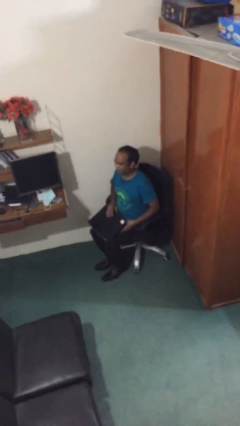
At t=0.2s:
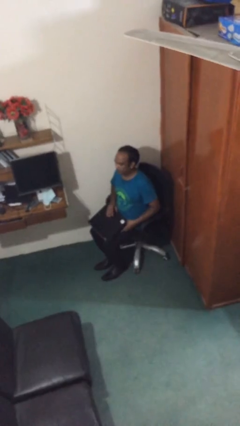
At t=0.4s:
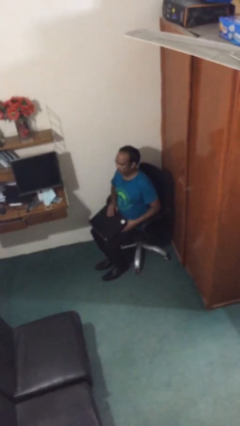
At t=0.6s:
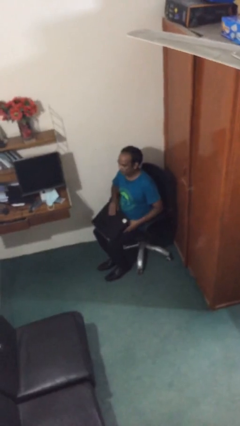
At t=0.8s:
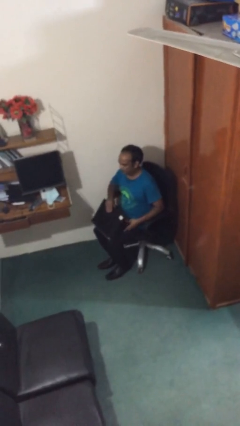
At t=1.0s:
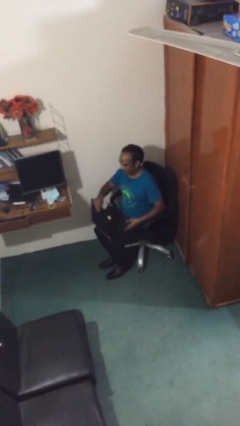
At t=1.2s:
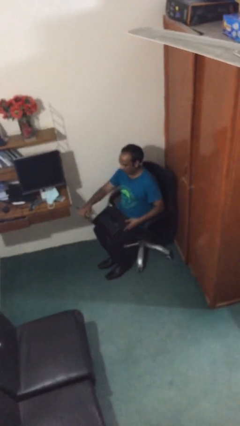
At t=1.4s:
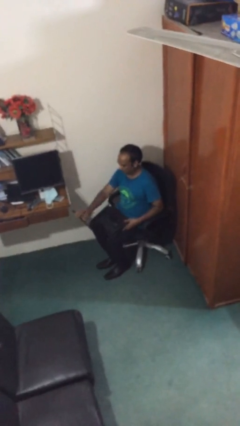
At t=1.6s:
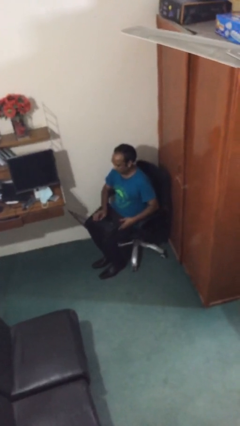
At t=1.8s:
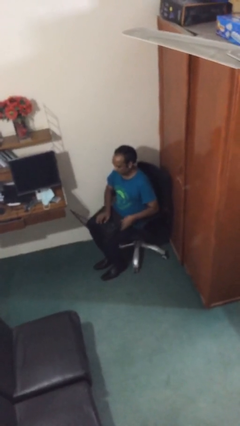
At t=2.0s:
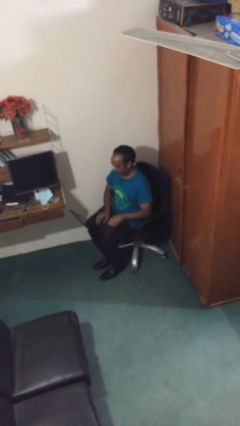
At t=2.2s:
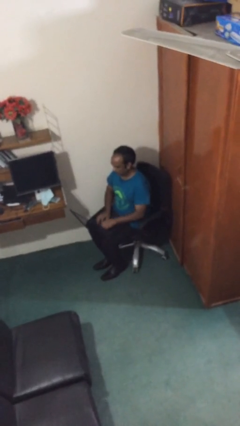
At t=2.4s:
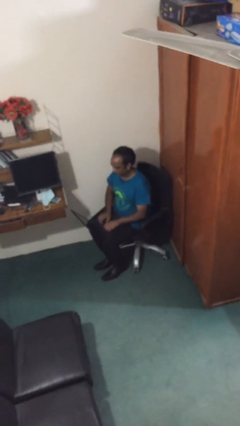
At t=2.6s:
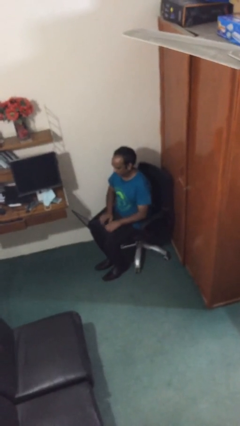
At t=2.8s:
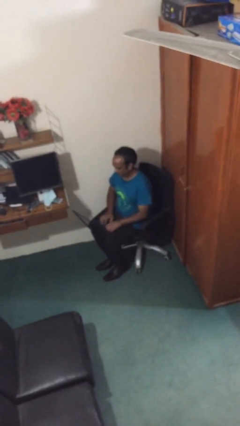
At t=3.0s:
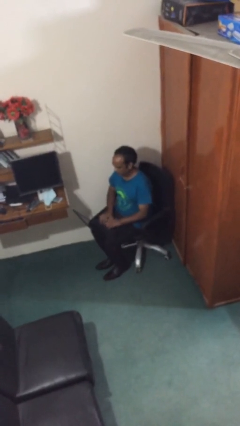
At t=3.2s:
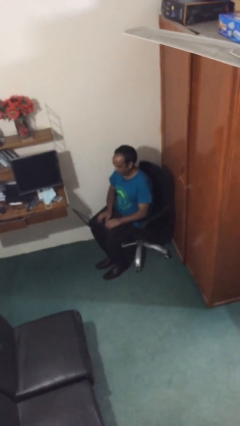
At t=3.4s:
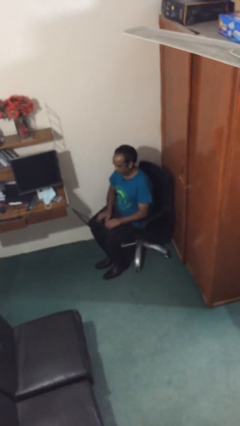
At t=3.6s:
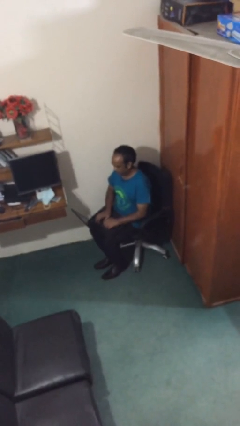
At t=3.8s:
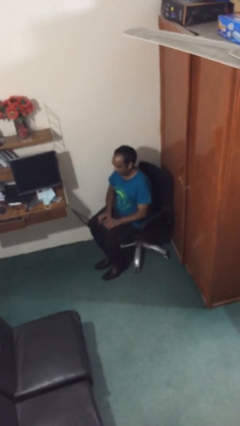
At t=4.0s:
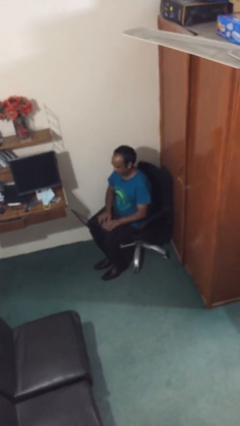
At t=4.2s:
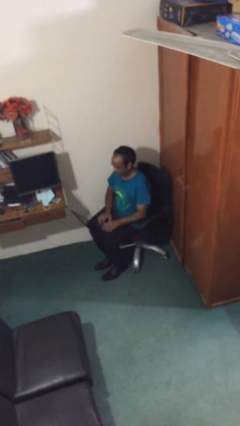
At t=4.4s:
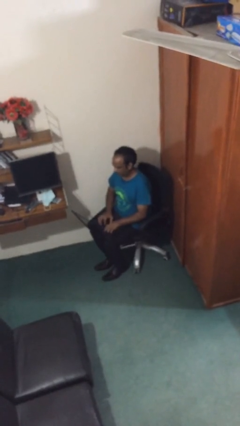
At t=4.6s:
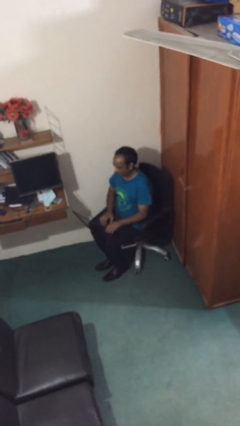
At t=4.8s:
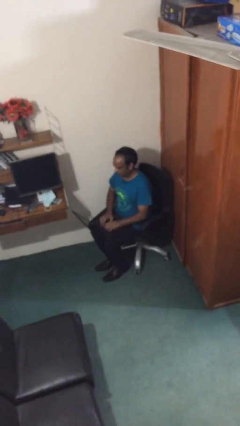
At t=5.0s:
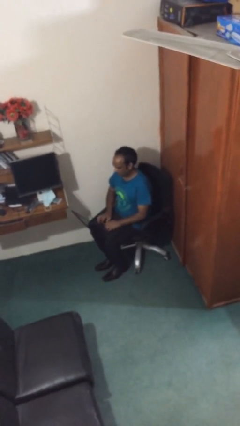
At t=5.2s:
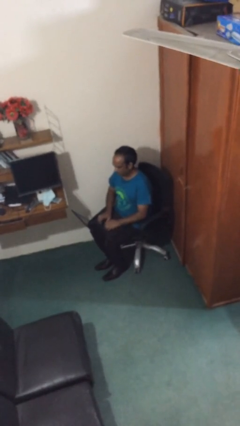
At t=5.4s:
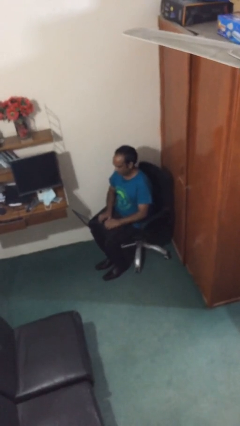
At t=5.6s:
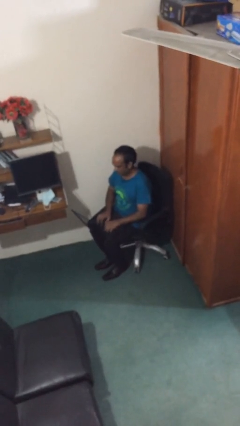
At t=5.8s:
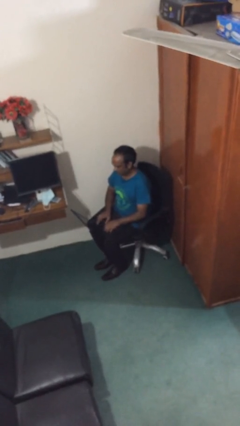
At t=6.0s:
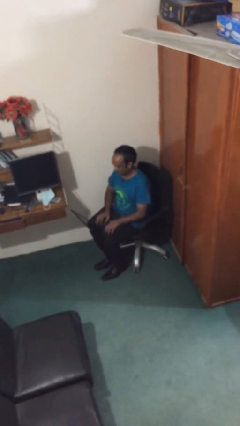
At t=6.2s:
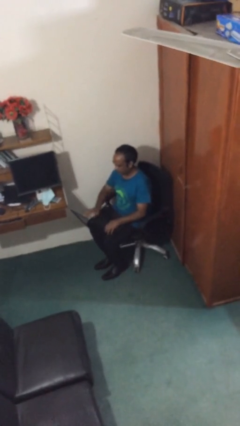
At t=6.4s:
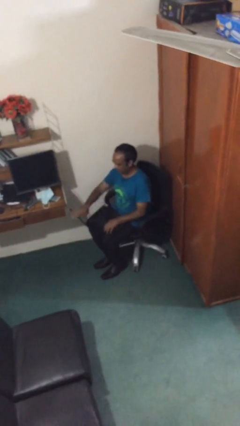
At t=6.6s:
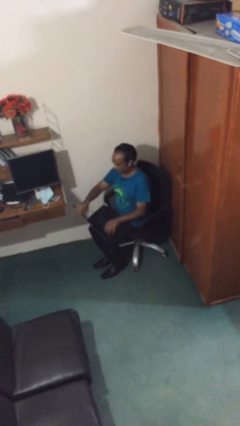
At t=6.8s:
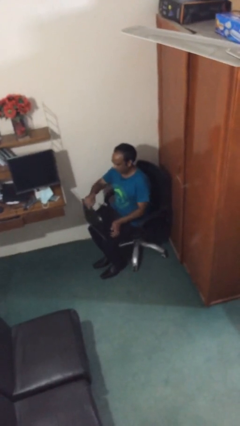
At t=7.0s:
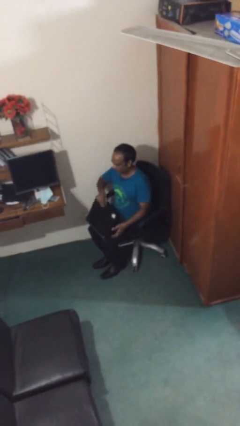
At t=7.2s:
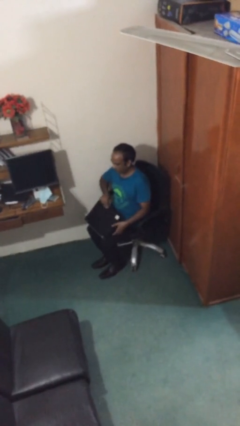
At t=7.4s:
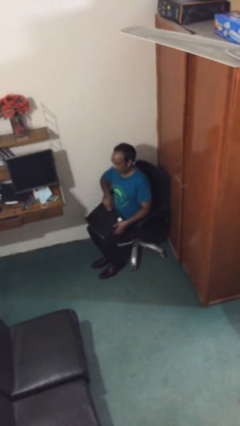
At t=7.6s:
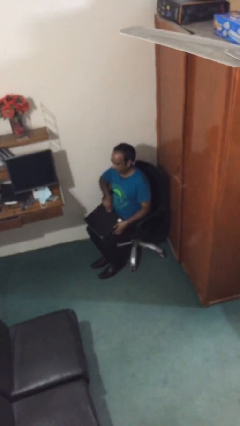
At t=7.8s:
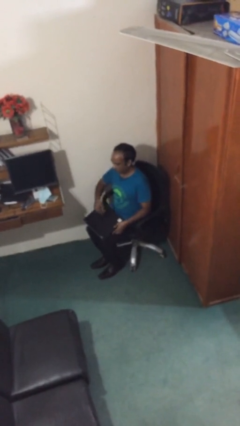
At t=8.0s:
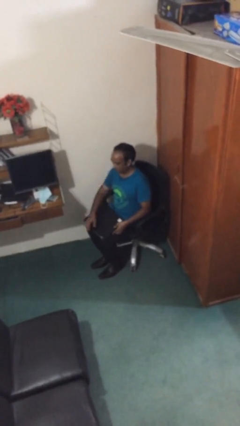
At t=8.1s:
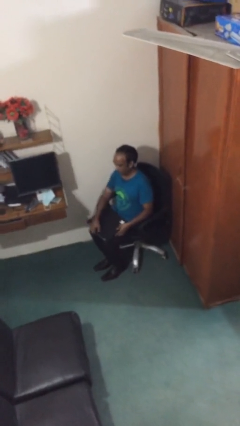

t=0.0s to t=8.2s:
person interacts with laptop

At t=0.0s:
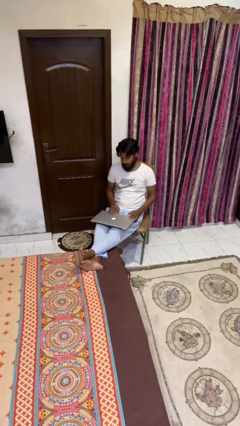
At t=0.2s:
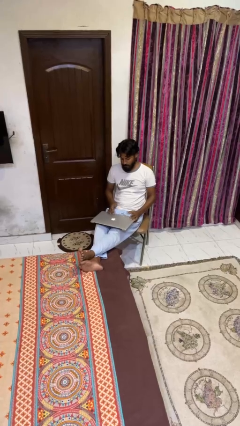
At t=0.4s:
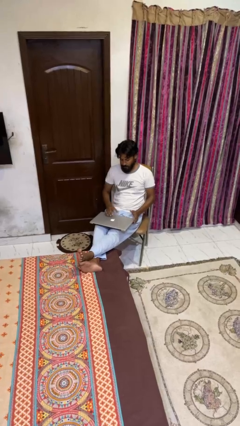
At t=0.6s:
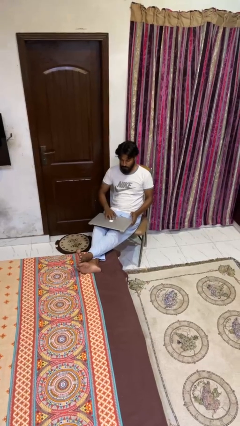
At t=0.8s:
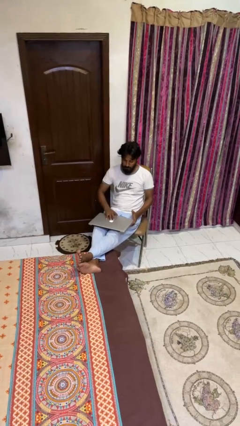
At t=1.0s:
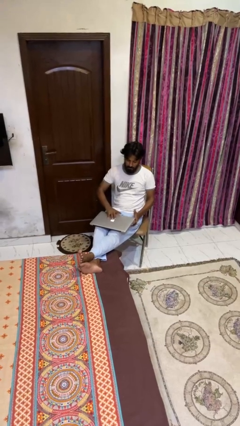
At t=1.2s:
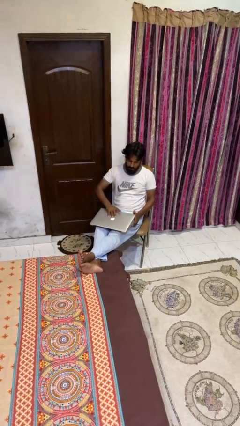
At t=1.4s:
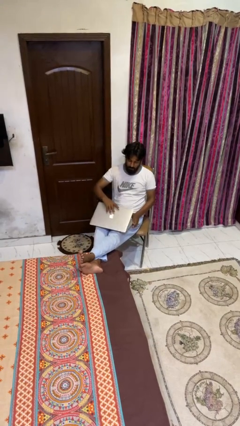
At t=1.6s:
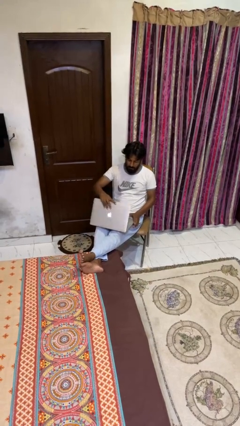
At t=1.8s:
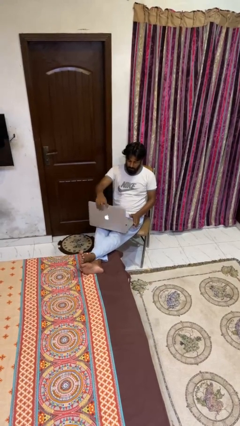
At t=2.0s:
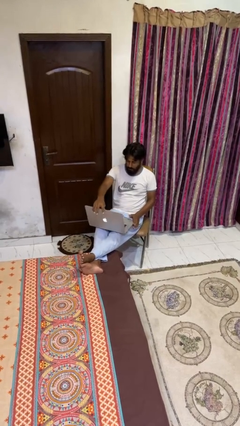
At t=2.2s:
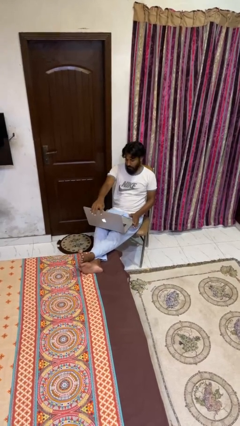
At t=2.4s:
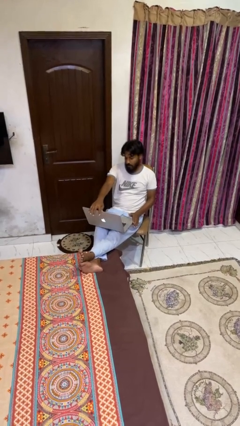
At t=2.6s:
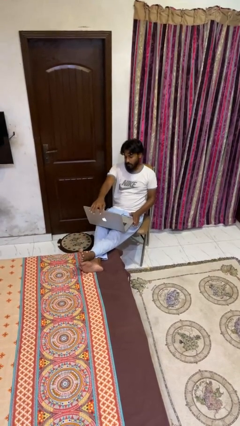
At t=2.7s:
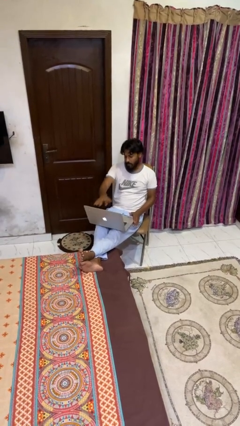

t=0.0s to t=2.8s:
person opens laptop

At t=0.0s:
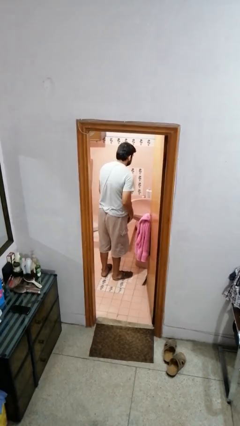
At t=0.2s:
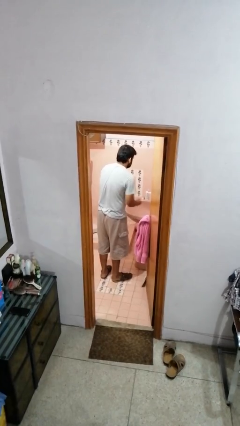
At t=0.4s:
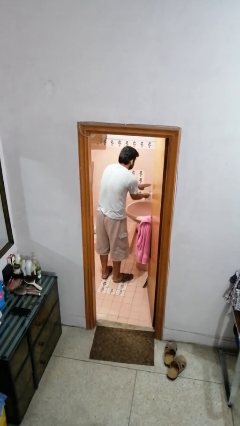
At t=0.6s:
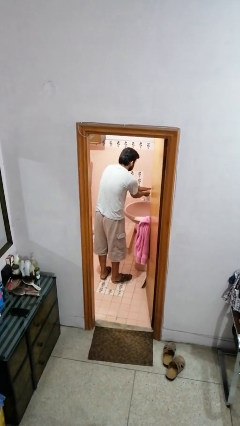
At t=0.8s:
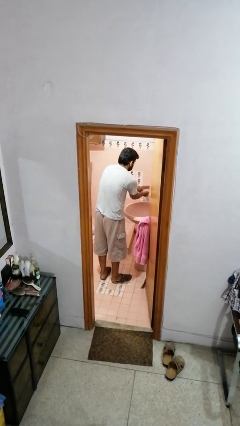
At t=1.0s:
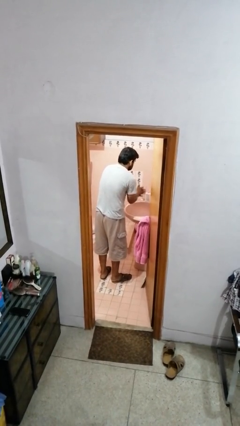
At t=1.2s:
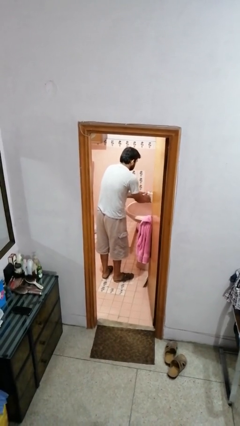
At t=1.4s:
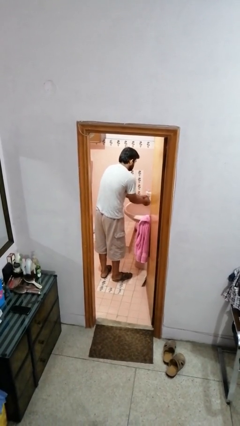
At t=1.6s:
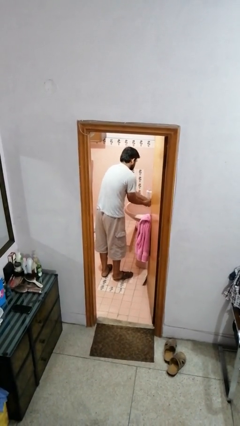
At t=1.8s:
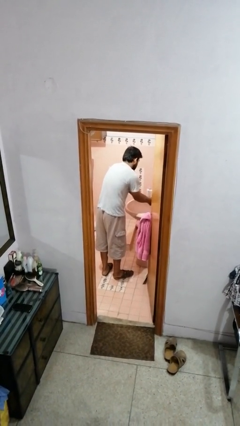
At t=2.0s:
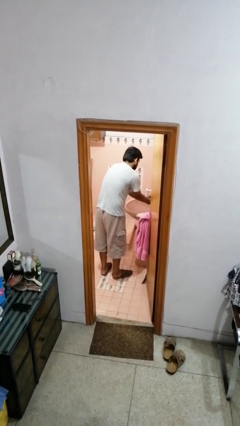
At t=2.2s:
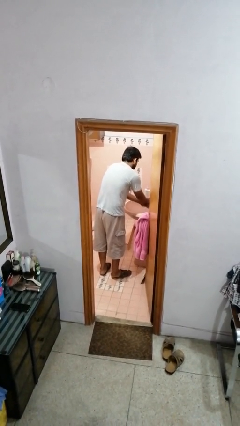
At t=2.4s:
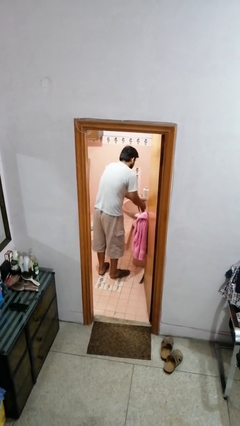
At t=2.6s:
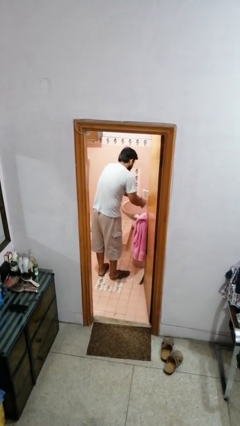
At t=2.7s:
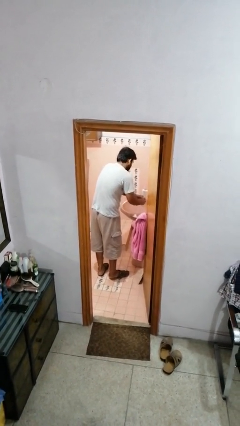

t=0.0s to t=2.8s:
person washes hands

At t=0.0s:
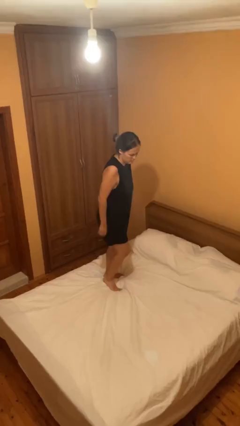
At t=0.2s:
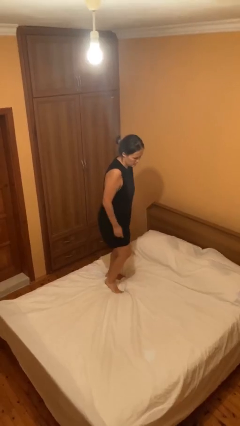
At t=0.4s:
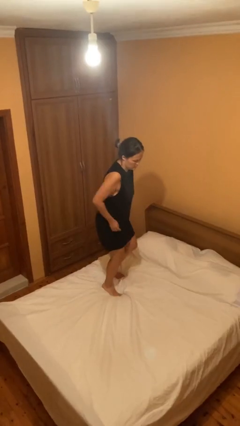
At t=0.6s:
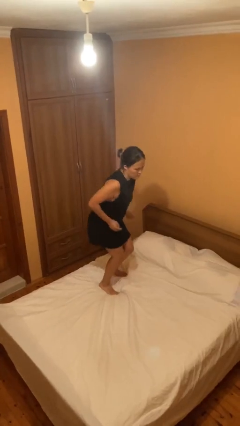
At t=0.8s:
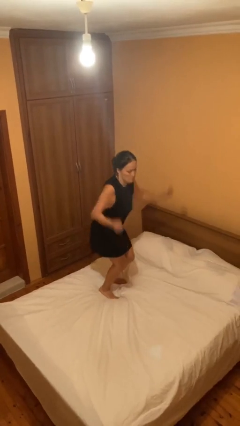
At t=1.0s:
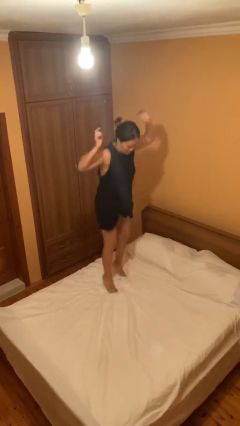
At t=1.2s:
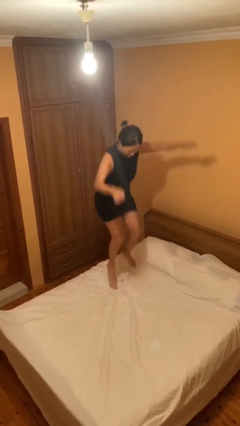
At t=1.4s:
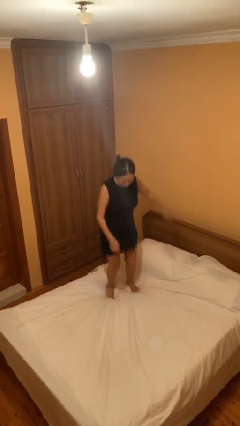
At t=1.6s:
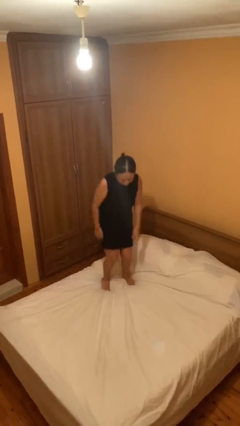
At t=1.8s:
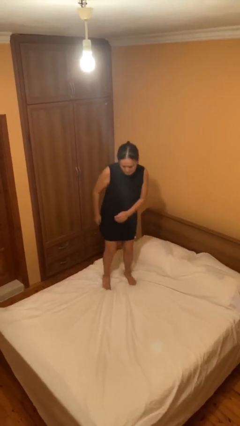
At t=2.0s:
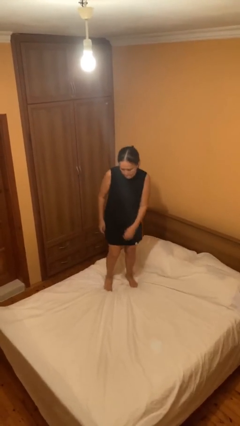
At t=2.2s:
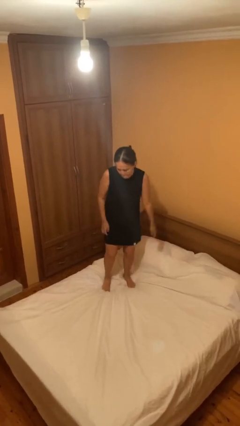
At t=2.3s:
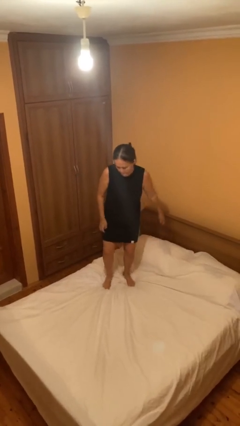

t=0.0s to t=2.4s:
person jumps on bed

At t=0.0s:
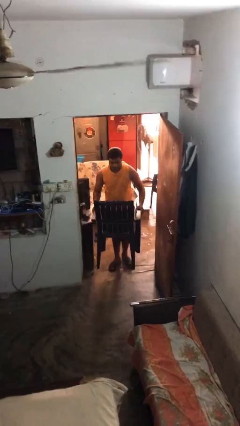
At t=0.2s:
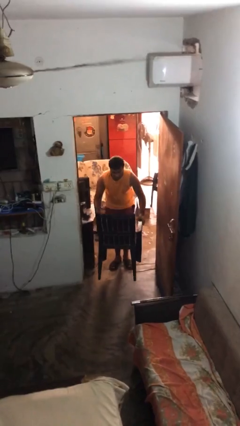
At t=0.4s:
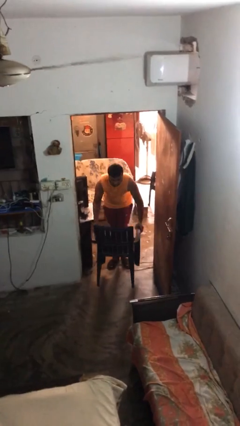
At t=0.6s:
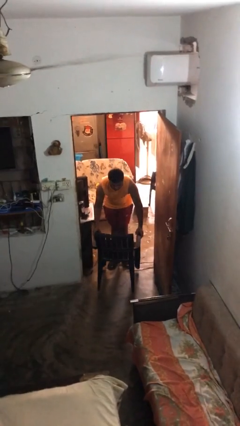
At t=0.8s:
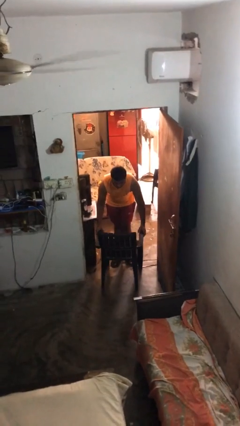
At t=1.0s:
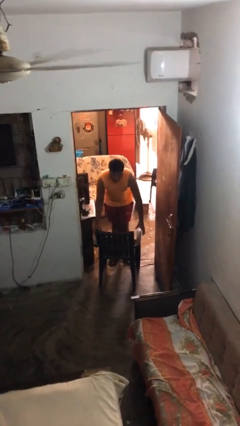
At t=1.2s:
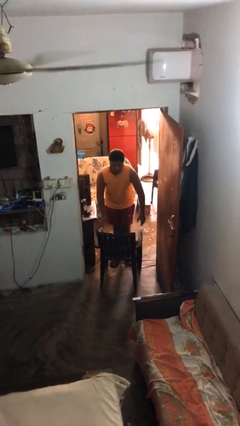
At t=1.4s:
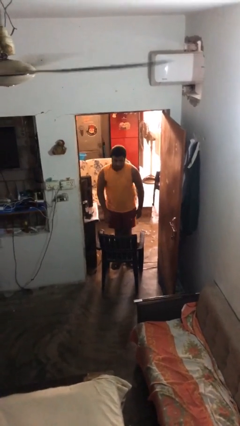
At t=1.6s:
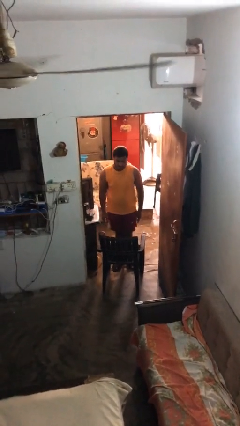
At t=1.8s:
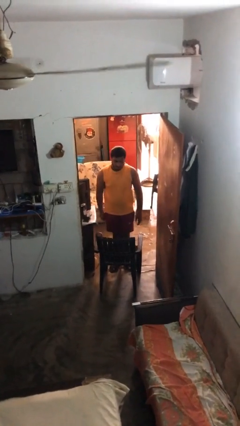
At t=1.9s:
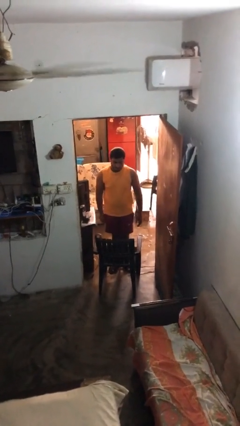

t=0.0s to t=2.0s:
person puts down object on floor
